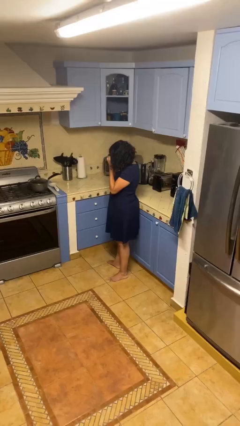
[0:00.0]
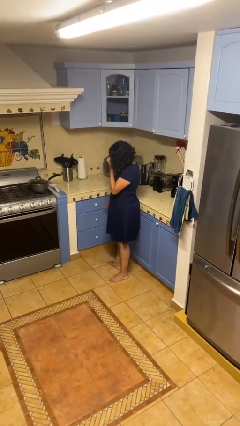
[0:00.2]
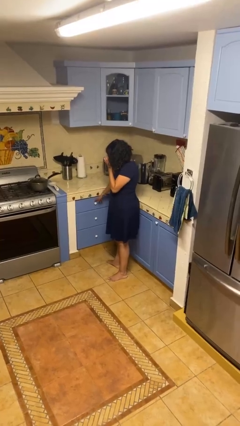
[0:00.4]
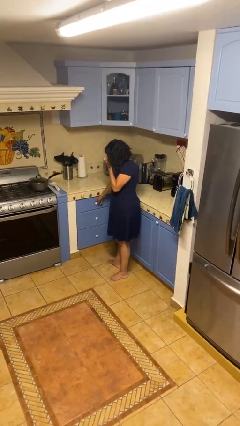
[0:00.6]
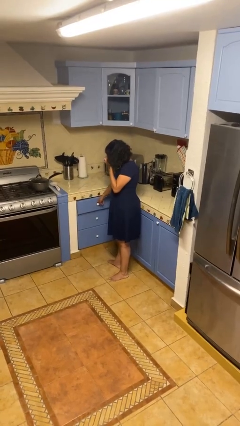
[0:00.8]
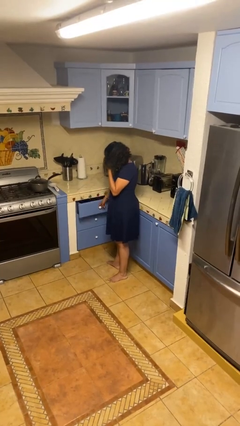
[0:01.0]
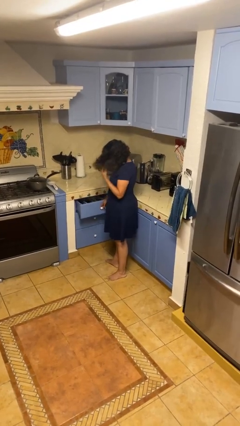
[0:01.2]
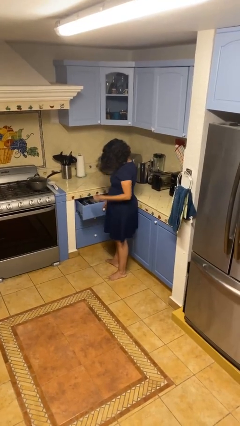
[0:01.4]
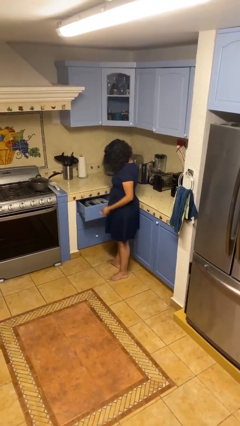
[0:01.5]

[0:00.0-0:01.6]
person opens kitchen drawer

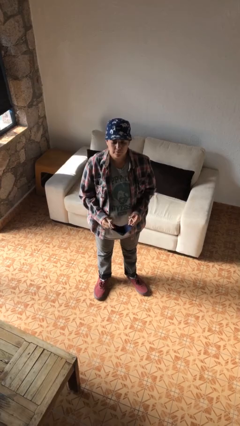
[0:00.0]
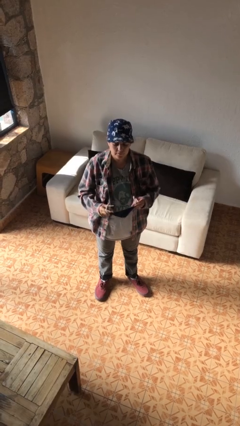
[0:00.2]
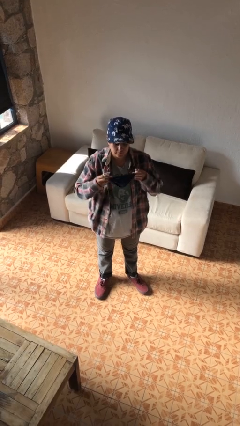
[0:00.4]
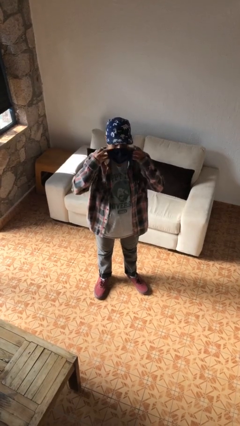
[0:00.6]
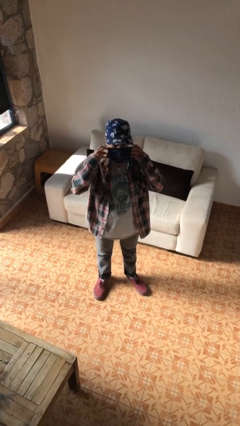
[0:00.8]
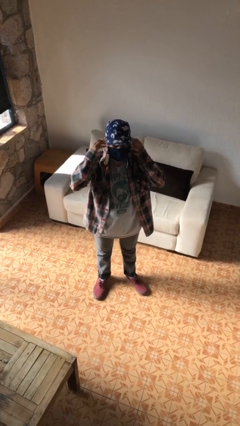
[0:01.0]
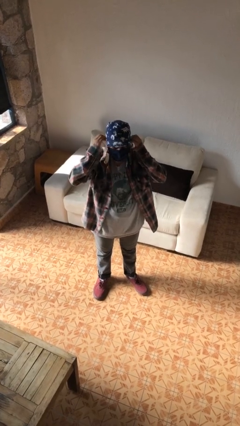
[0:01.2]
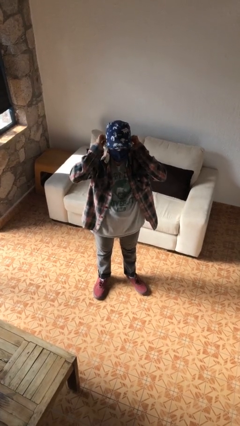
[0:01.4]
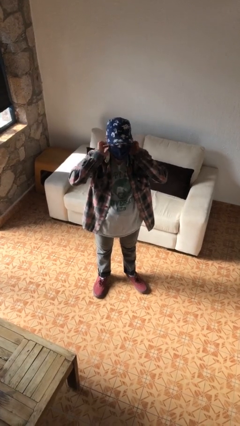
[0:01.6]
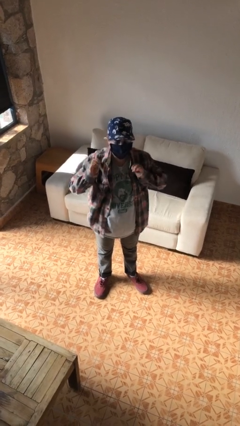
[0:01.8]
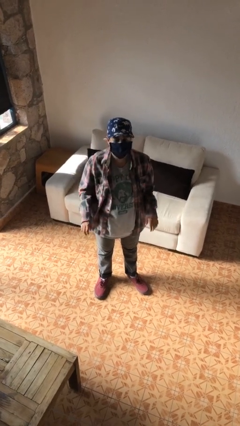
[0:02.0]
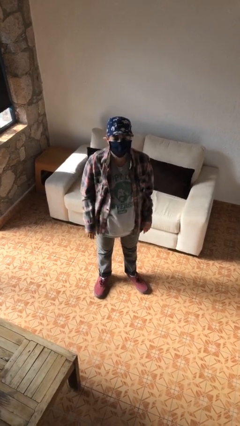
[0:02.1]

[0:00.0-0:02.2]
person puts on facemask

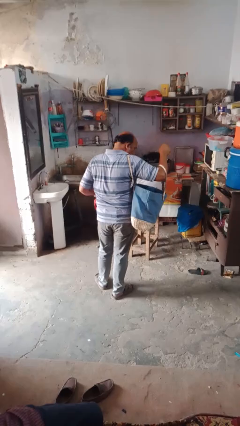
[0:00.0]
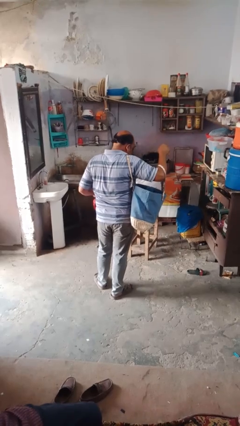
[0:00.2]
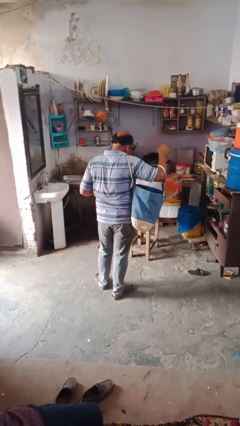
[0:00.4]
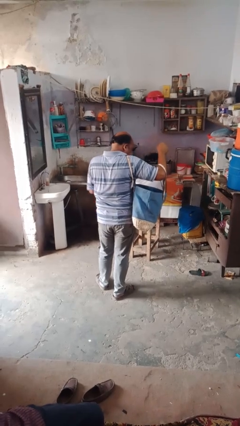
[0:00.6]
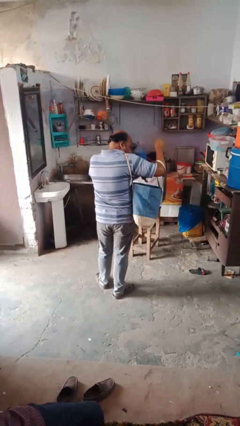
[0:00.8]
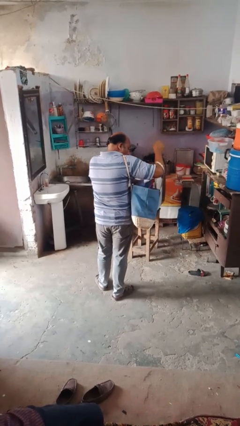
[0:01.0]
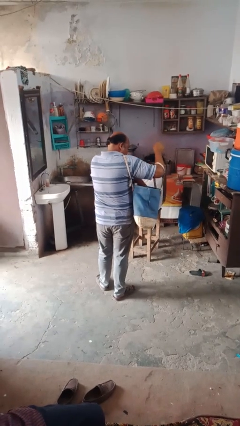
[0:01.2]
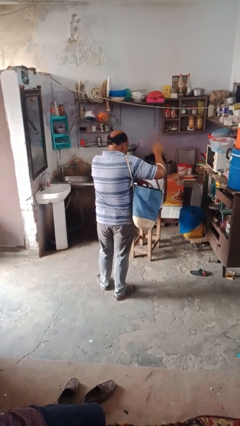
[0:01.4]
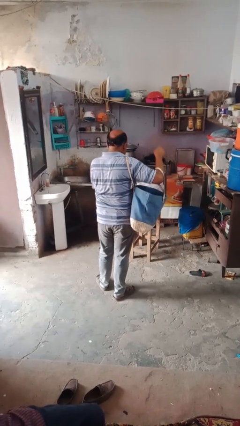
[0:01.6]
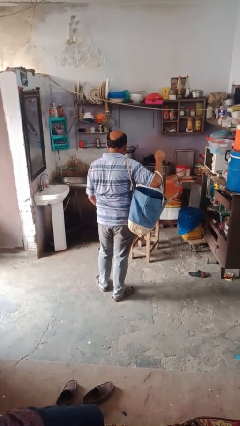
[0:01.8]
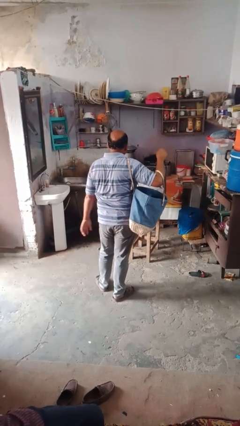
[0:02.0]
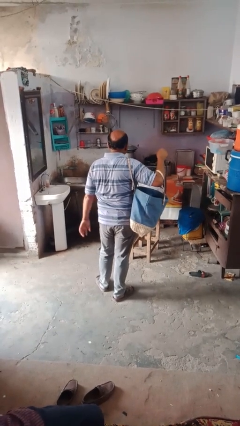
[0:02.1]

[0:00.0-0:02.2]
person puts object into bag

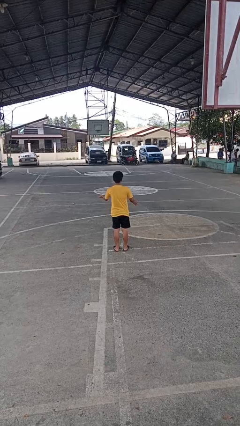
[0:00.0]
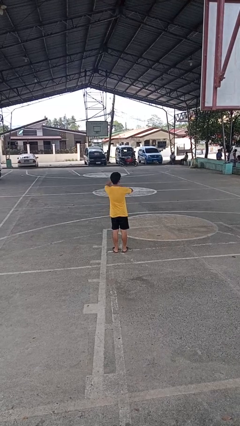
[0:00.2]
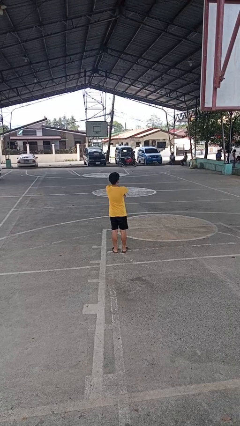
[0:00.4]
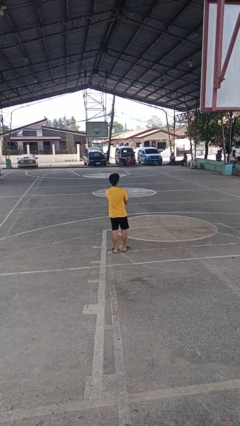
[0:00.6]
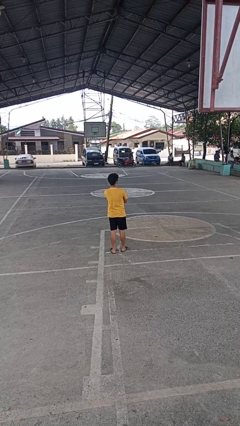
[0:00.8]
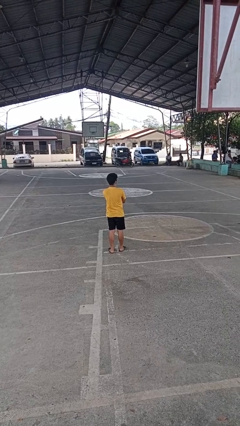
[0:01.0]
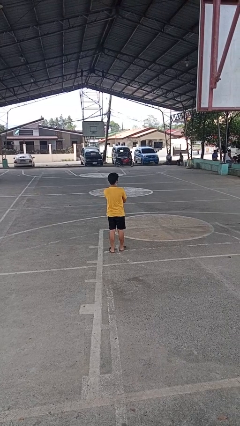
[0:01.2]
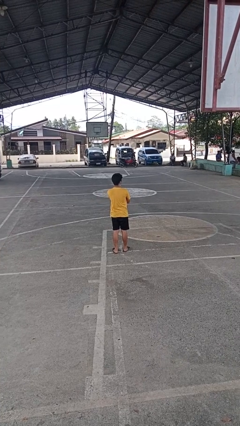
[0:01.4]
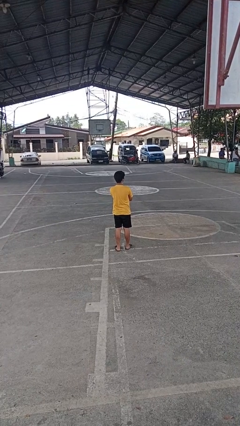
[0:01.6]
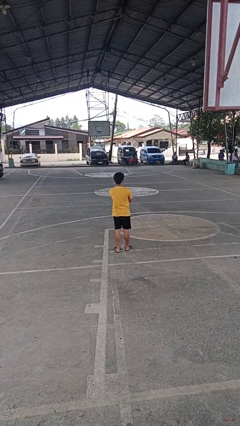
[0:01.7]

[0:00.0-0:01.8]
person crosses arms

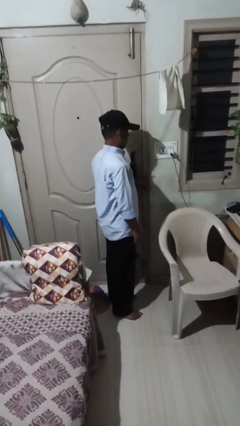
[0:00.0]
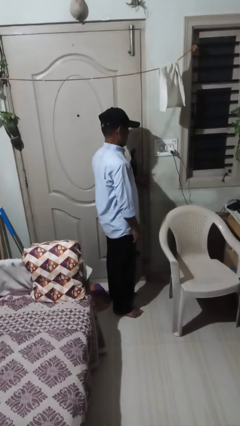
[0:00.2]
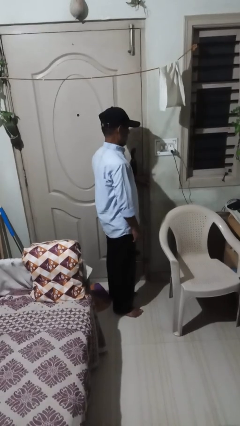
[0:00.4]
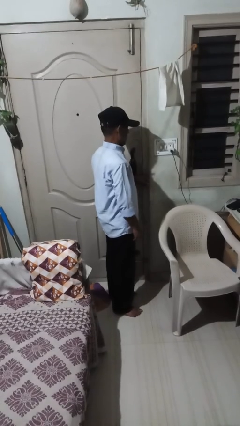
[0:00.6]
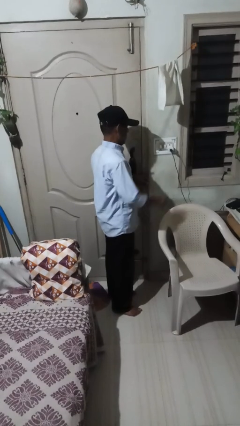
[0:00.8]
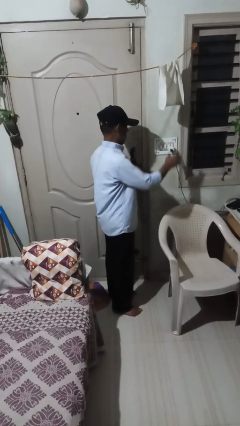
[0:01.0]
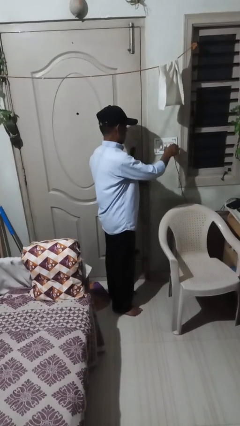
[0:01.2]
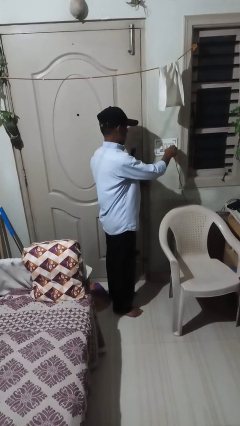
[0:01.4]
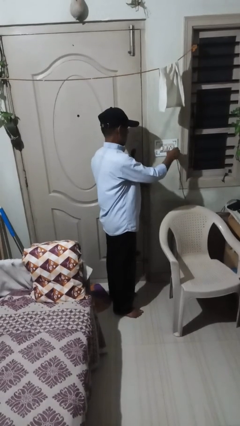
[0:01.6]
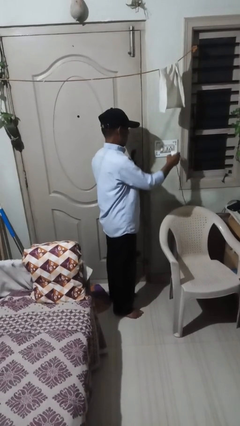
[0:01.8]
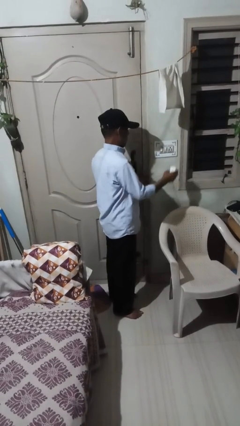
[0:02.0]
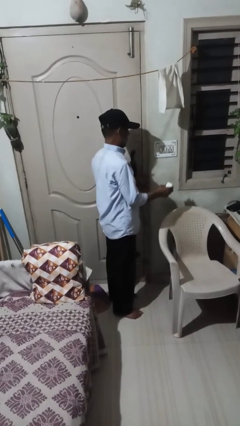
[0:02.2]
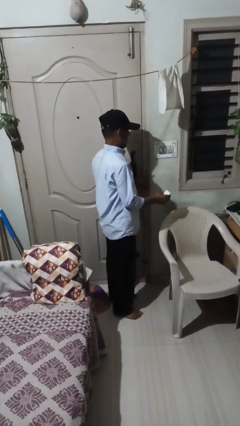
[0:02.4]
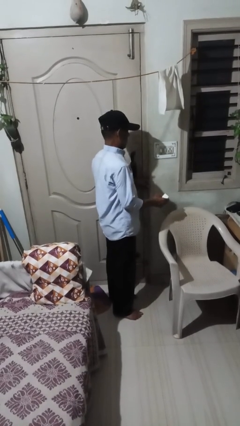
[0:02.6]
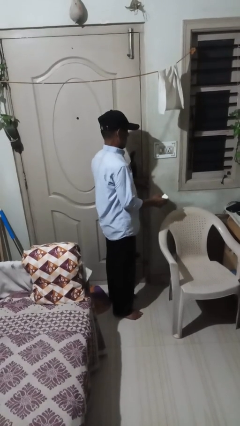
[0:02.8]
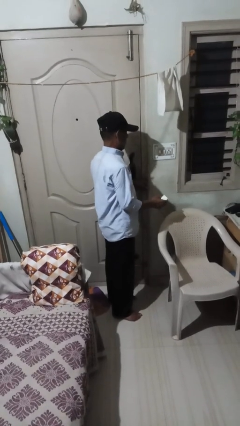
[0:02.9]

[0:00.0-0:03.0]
person unplugs from electrical socket

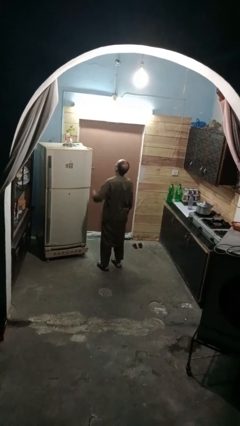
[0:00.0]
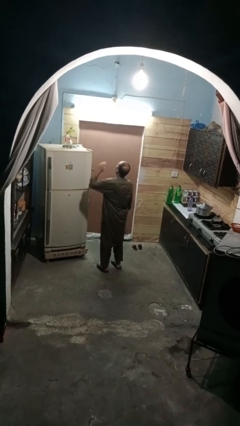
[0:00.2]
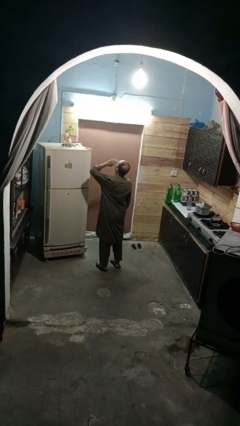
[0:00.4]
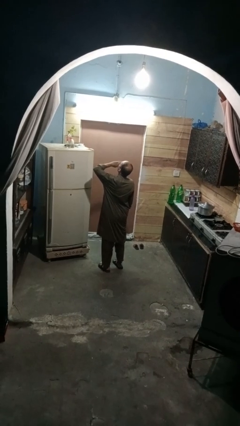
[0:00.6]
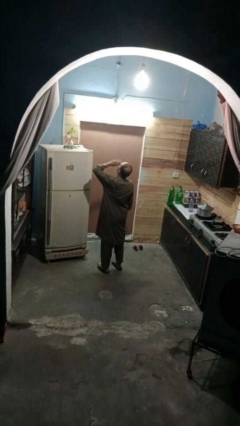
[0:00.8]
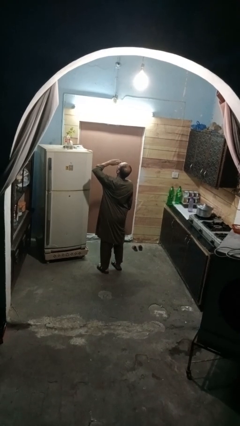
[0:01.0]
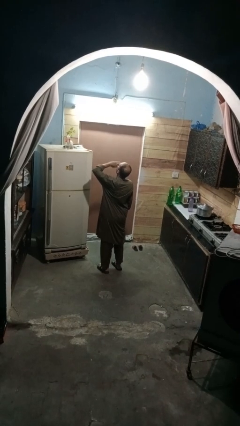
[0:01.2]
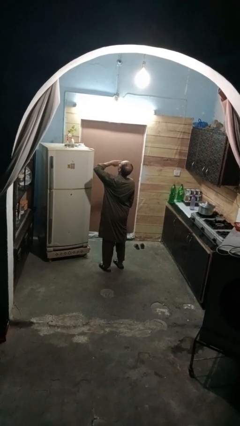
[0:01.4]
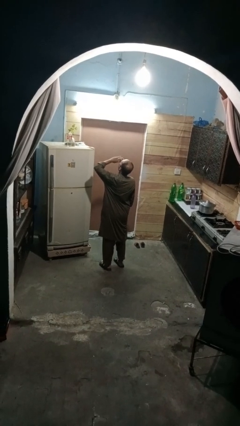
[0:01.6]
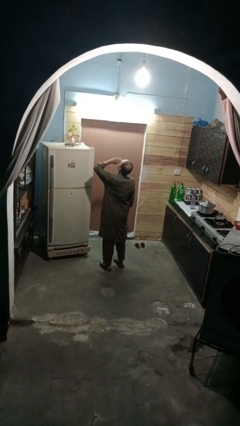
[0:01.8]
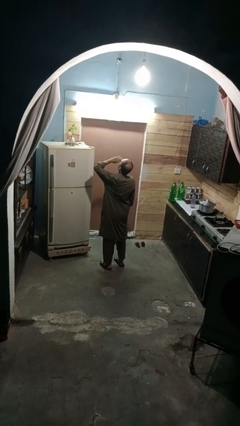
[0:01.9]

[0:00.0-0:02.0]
person yawns

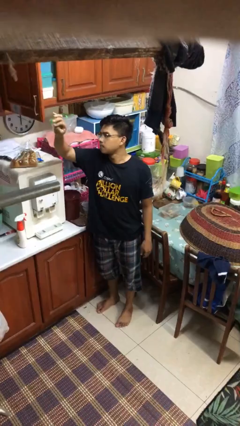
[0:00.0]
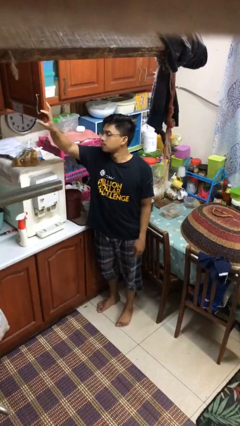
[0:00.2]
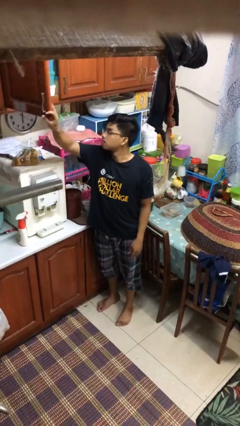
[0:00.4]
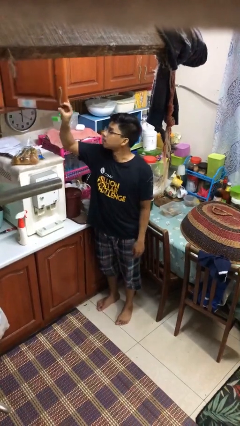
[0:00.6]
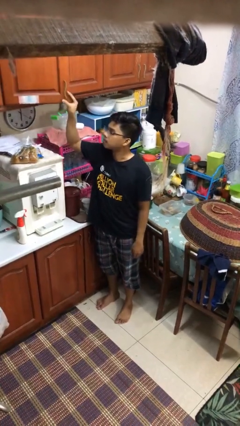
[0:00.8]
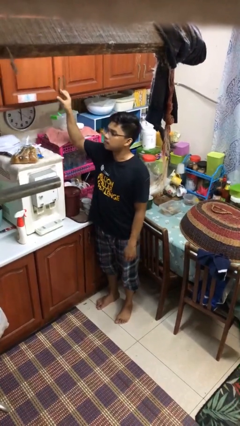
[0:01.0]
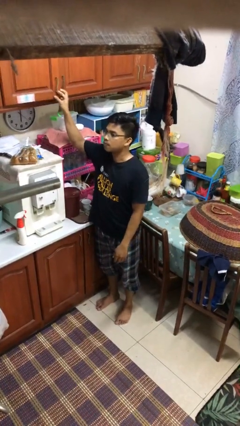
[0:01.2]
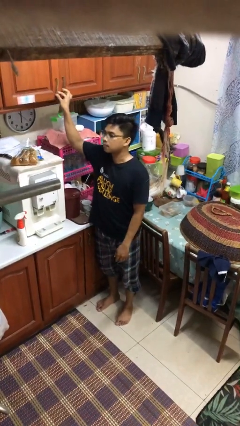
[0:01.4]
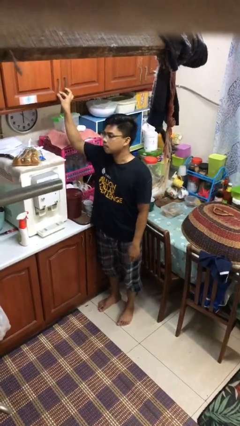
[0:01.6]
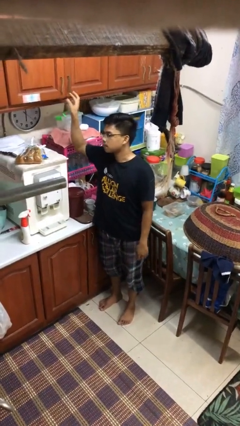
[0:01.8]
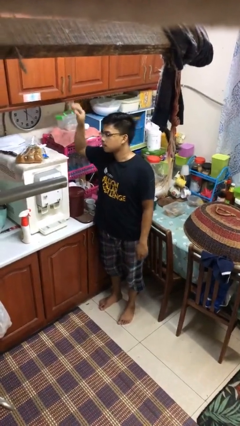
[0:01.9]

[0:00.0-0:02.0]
person closes kitchen drawer

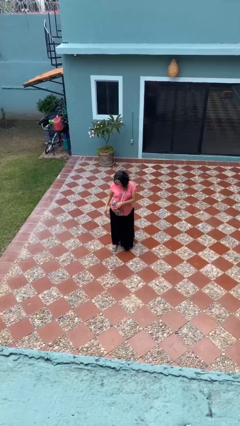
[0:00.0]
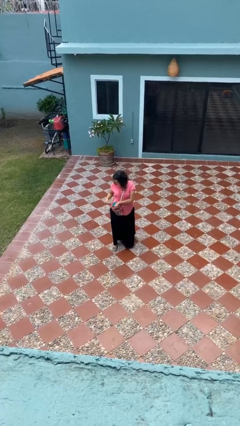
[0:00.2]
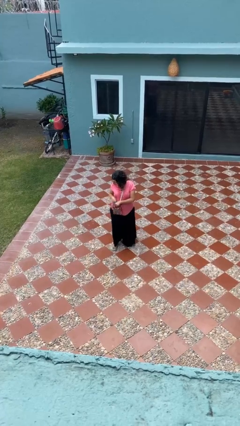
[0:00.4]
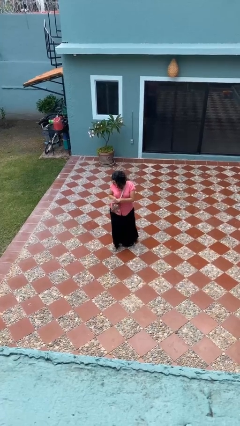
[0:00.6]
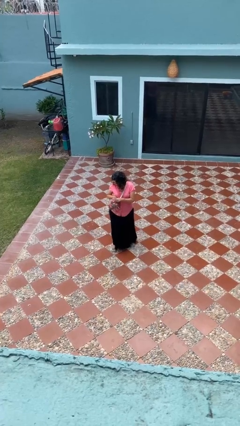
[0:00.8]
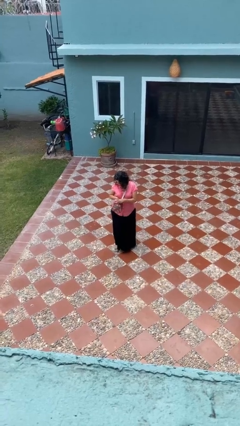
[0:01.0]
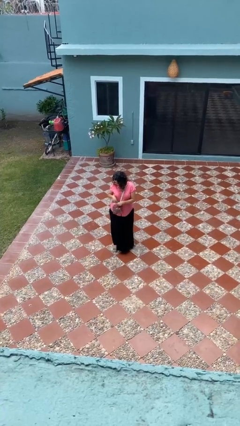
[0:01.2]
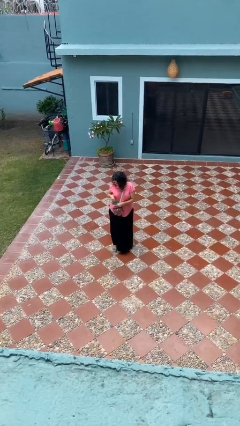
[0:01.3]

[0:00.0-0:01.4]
person searches in purse

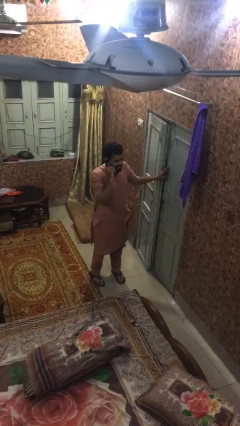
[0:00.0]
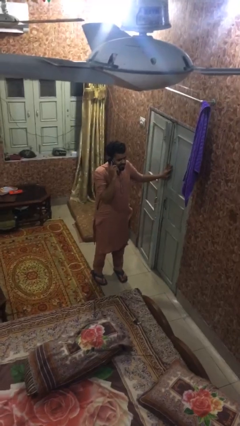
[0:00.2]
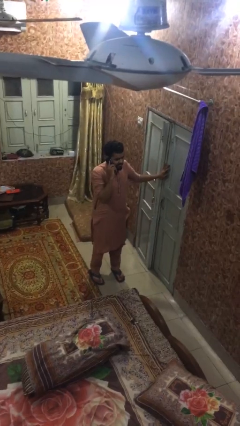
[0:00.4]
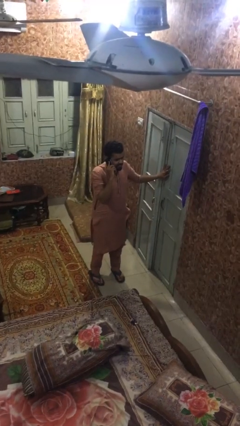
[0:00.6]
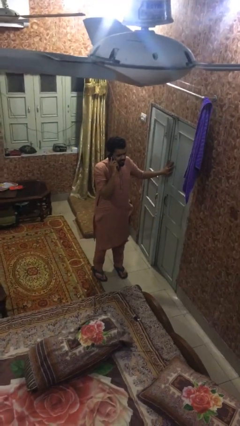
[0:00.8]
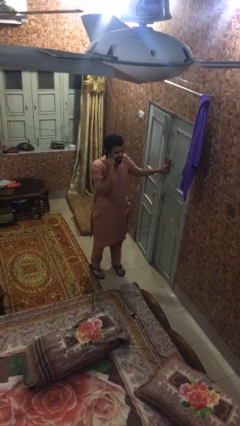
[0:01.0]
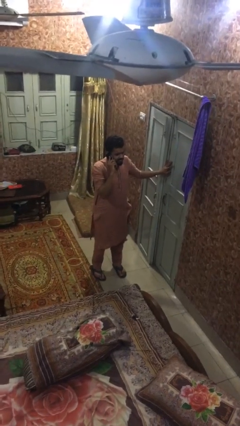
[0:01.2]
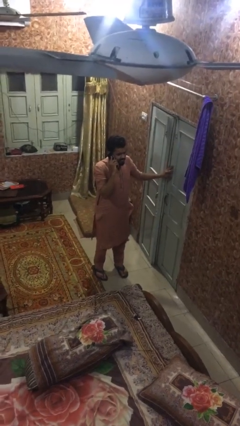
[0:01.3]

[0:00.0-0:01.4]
person closes facility door
